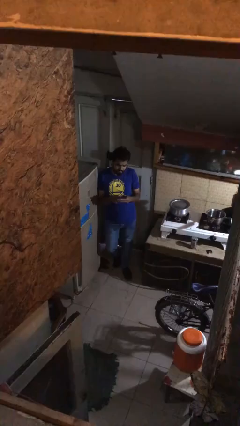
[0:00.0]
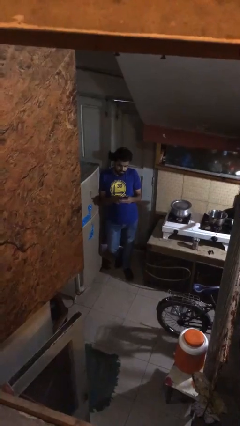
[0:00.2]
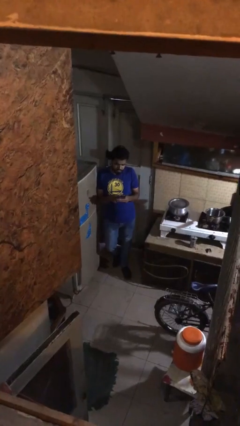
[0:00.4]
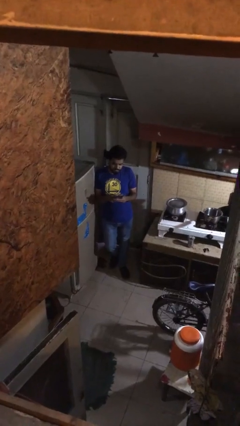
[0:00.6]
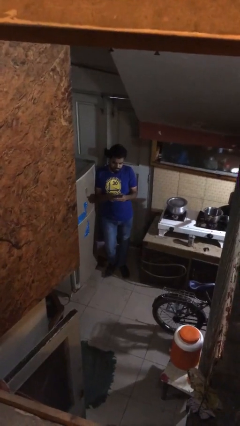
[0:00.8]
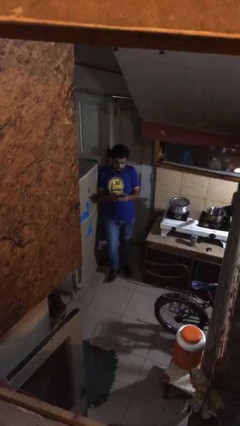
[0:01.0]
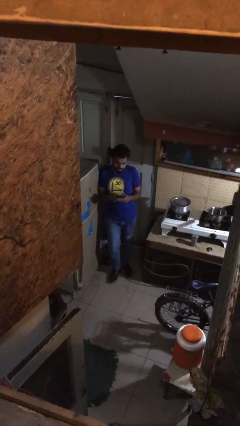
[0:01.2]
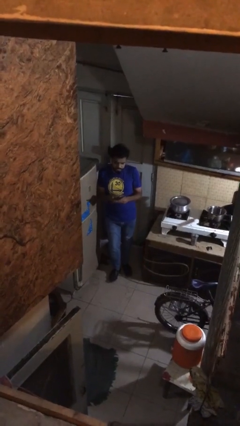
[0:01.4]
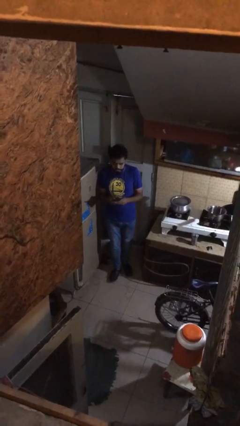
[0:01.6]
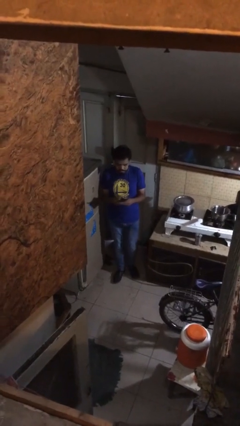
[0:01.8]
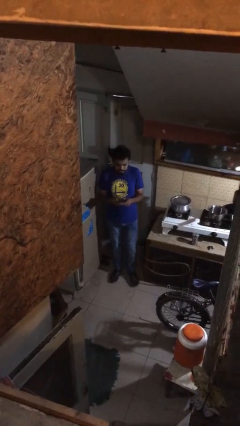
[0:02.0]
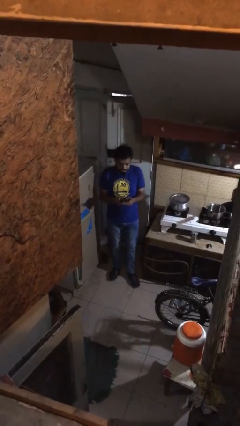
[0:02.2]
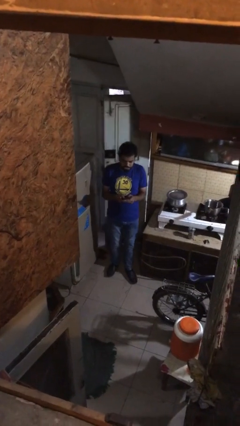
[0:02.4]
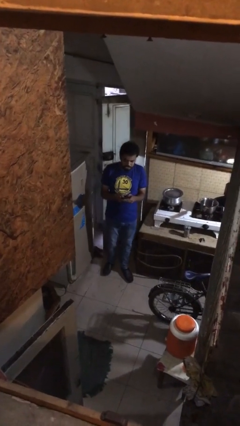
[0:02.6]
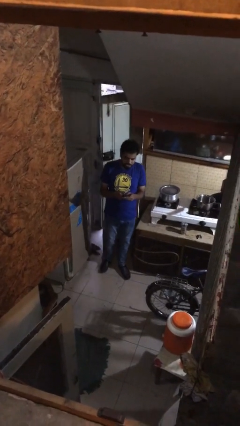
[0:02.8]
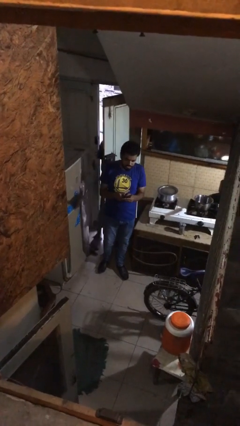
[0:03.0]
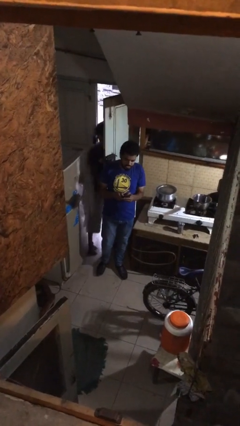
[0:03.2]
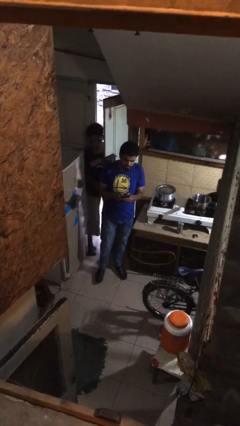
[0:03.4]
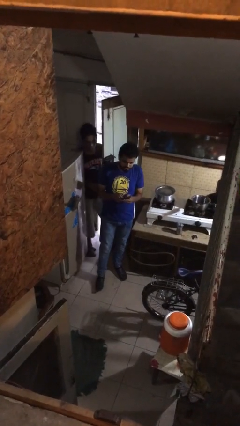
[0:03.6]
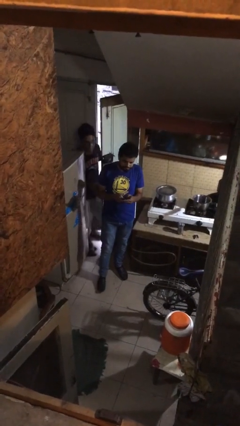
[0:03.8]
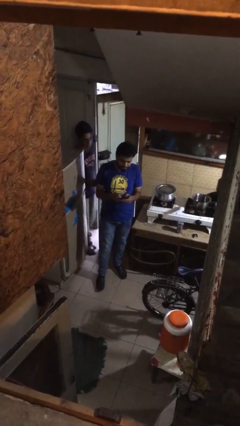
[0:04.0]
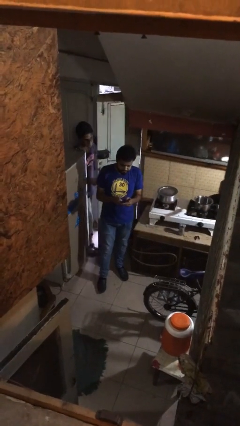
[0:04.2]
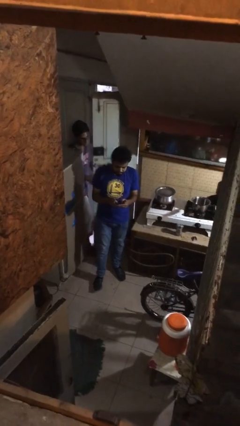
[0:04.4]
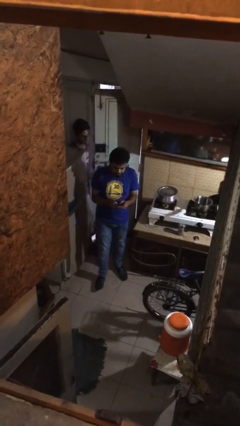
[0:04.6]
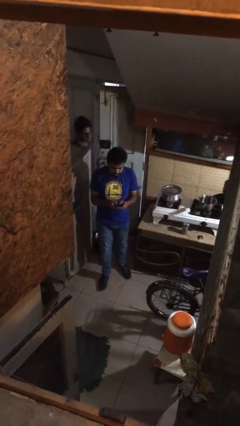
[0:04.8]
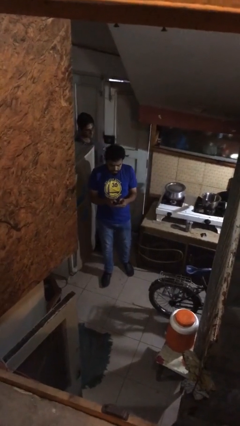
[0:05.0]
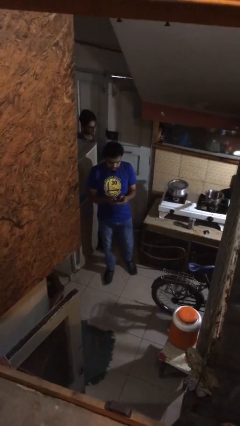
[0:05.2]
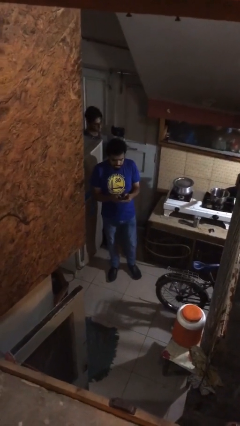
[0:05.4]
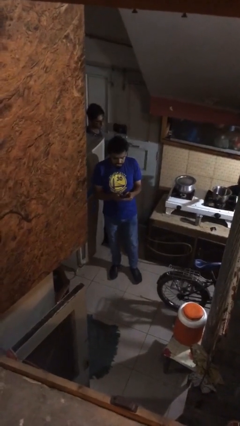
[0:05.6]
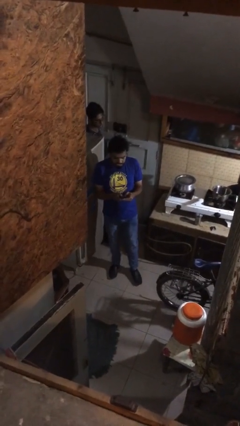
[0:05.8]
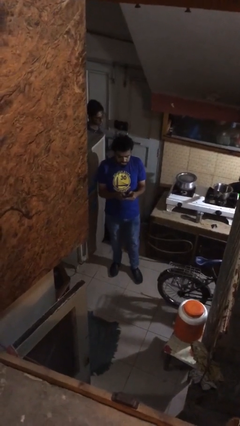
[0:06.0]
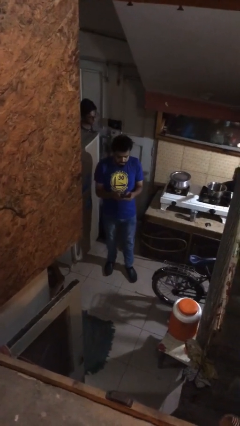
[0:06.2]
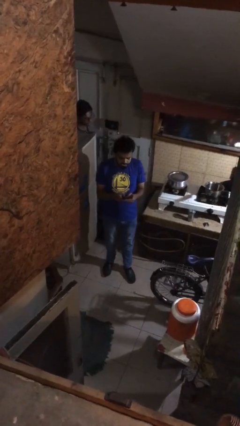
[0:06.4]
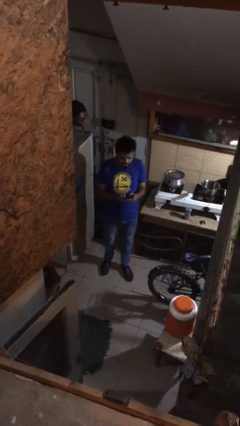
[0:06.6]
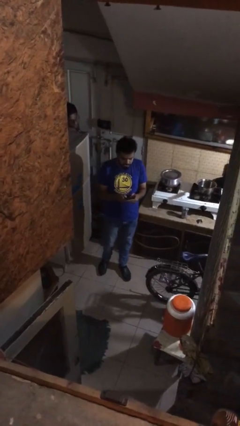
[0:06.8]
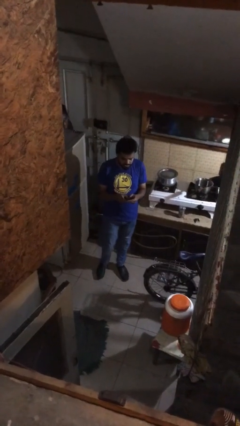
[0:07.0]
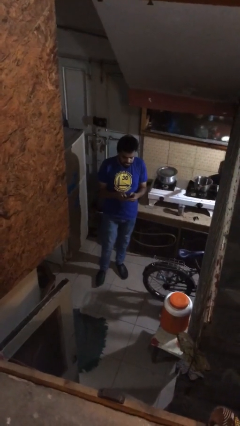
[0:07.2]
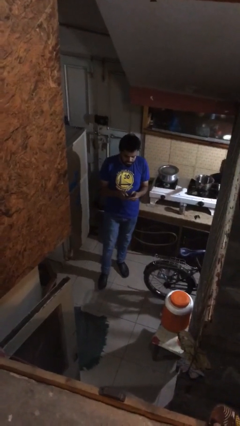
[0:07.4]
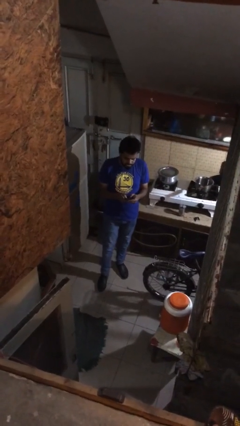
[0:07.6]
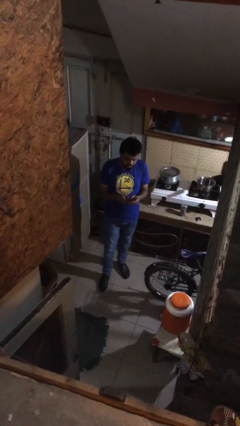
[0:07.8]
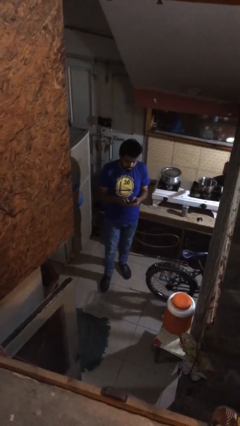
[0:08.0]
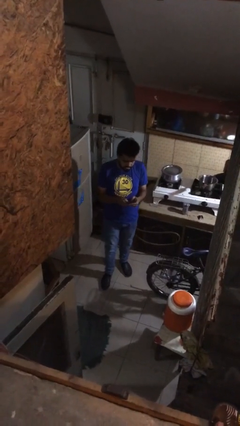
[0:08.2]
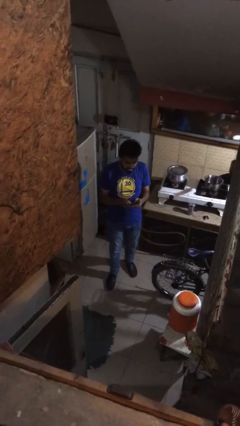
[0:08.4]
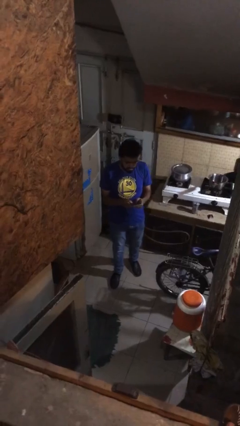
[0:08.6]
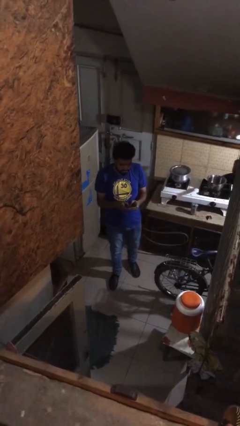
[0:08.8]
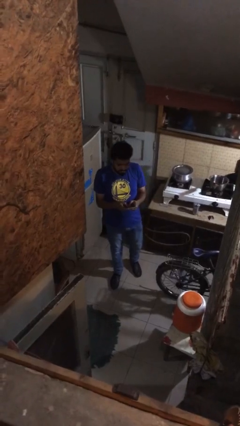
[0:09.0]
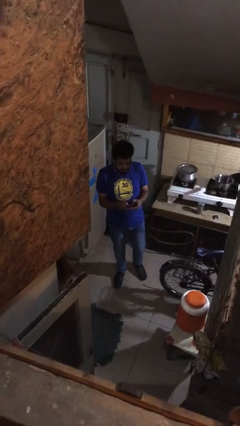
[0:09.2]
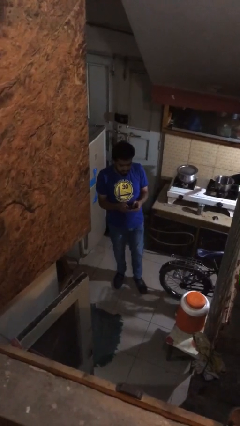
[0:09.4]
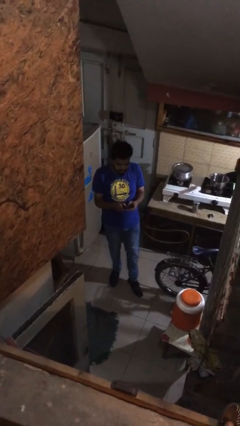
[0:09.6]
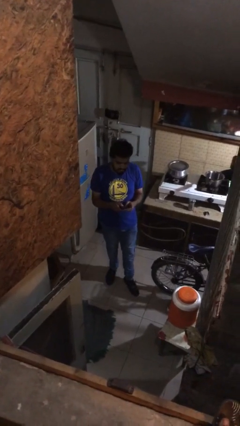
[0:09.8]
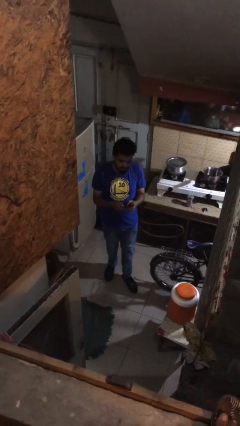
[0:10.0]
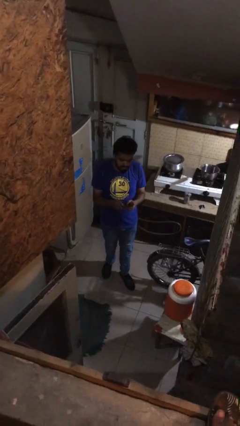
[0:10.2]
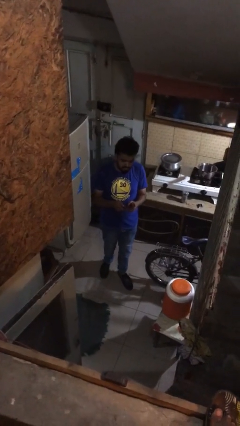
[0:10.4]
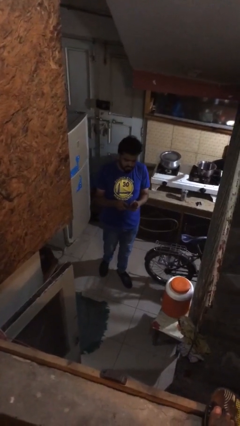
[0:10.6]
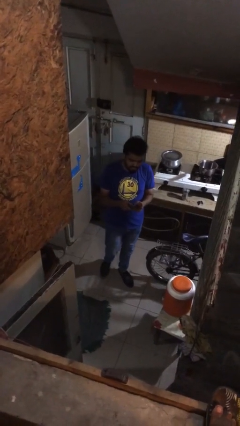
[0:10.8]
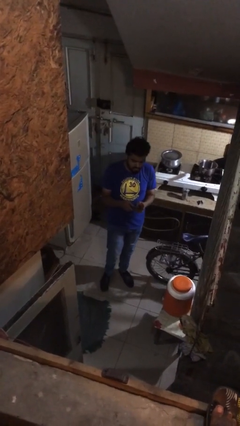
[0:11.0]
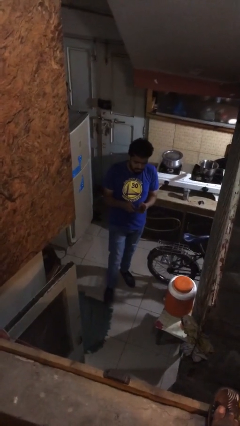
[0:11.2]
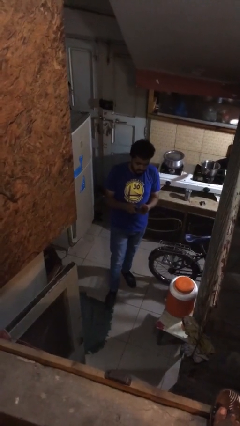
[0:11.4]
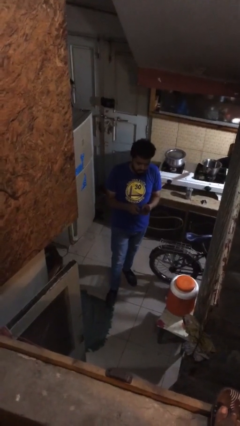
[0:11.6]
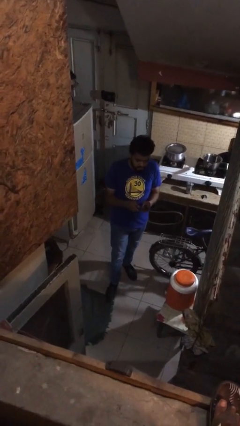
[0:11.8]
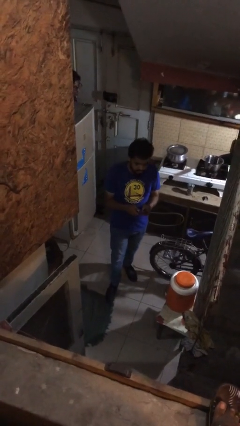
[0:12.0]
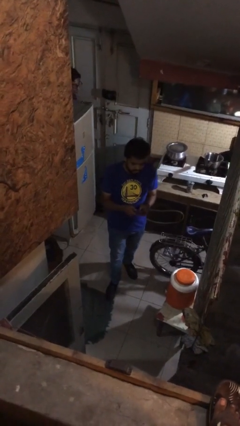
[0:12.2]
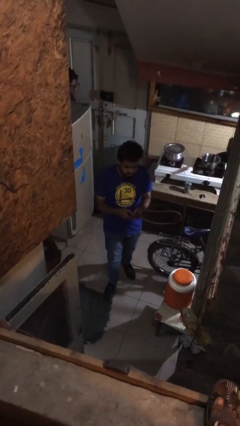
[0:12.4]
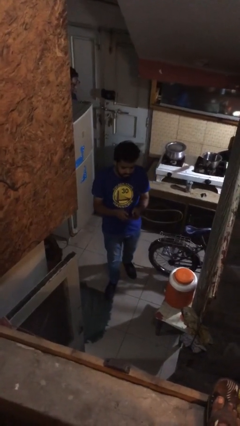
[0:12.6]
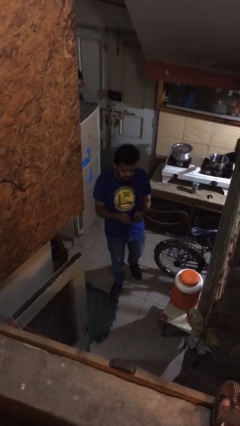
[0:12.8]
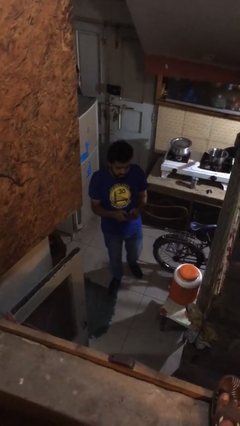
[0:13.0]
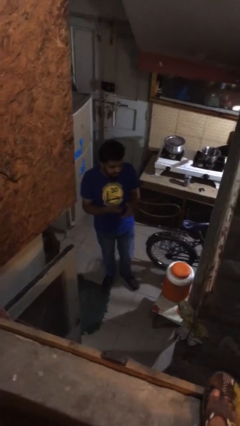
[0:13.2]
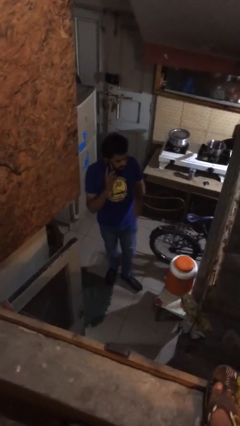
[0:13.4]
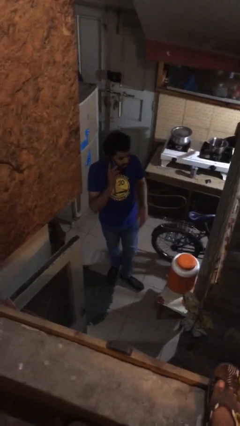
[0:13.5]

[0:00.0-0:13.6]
person texts on phone

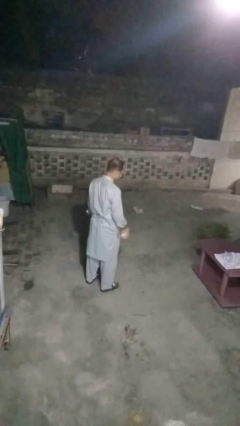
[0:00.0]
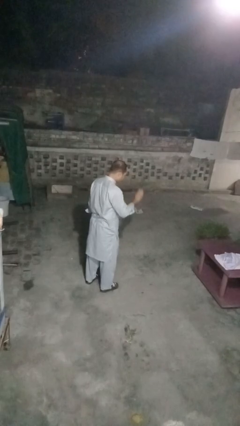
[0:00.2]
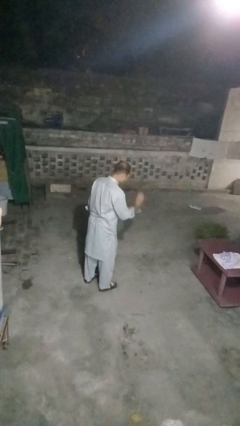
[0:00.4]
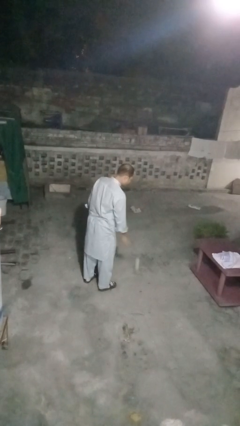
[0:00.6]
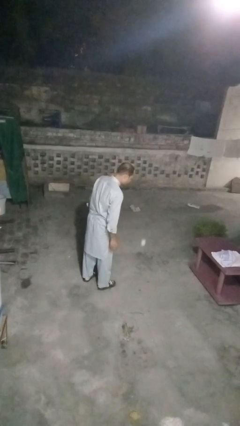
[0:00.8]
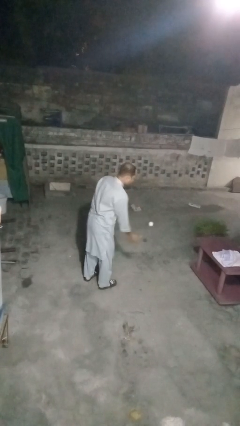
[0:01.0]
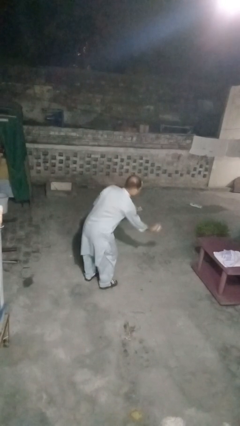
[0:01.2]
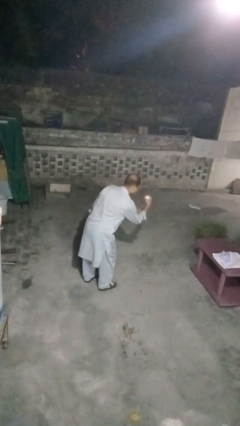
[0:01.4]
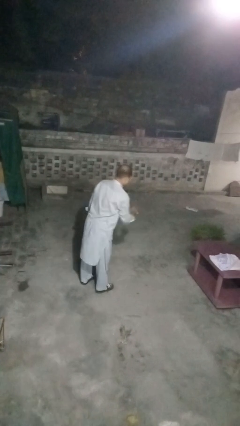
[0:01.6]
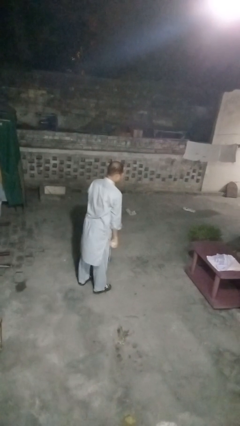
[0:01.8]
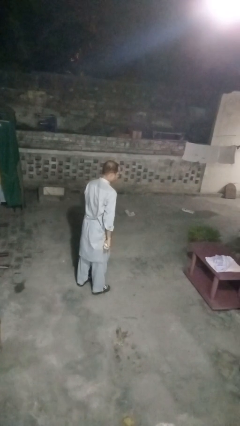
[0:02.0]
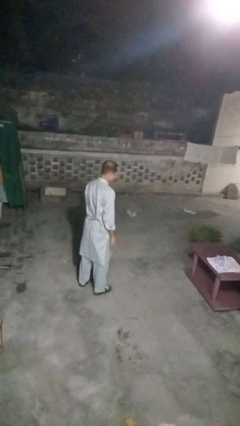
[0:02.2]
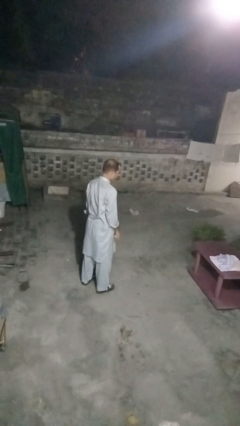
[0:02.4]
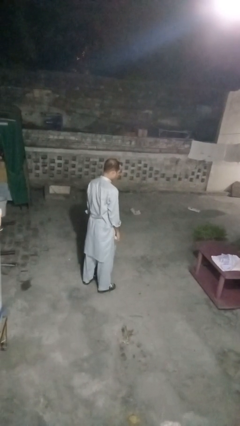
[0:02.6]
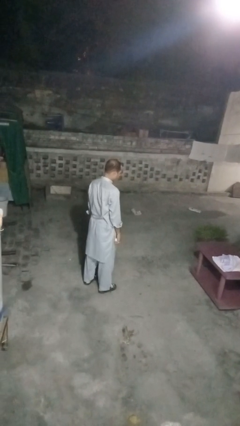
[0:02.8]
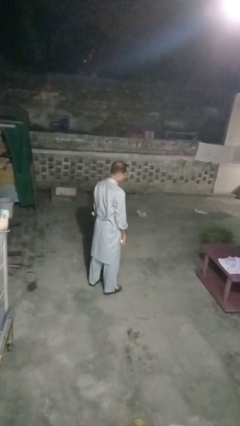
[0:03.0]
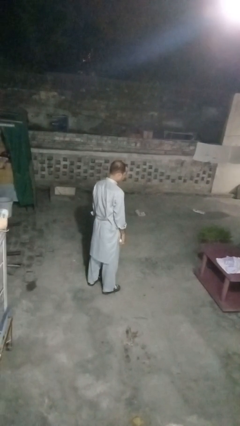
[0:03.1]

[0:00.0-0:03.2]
person bounces ball on floor

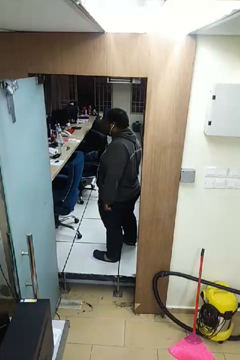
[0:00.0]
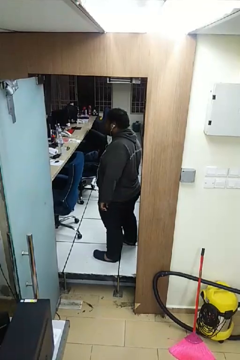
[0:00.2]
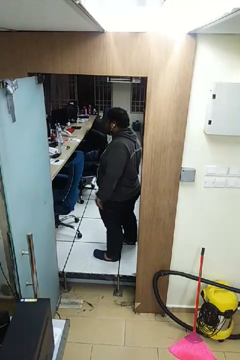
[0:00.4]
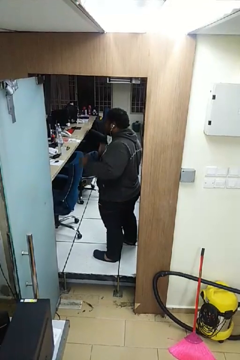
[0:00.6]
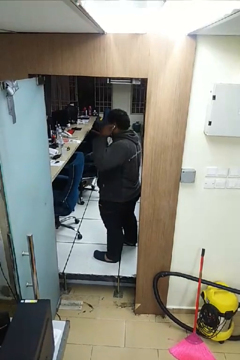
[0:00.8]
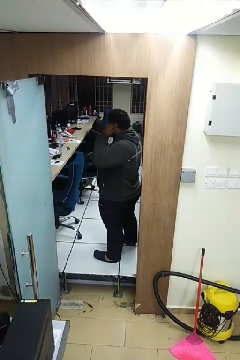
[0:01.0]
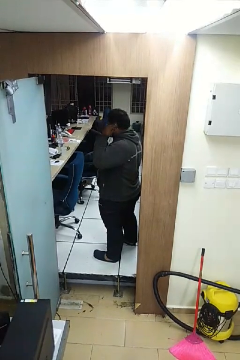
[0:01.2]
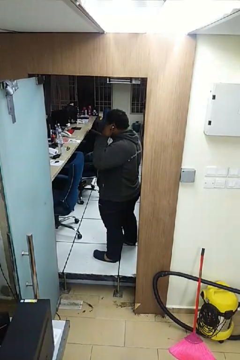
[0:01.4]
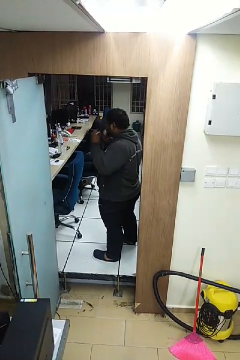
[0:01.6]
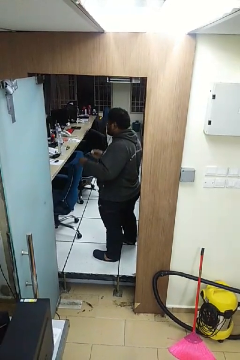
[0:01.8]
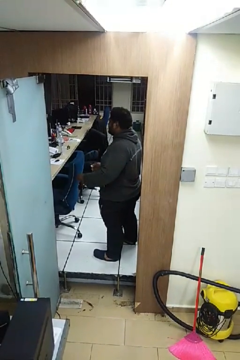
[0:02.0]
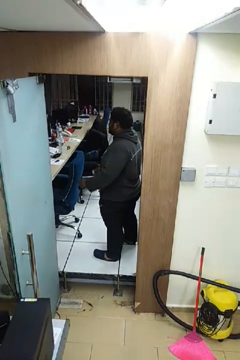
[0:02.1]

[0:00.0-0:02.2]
person takes off headphones
